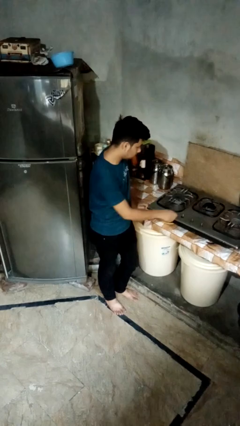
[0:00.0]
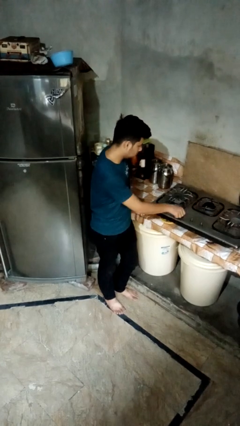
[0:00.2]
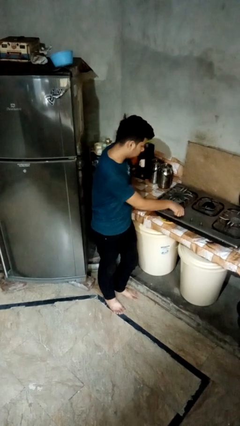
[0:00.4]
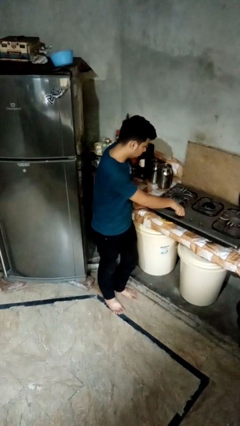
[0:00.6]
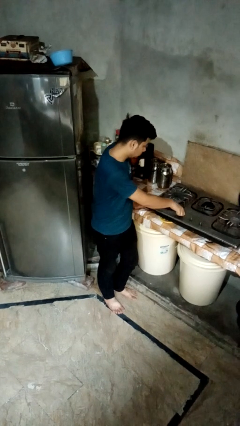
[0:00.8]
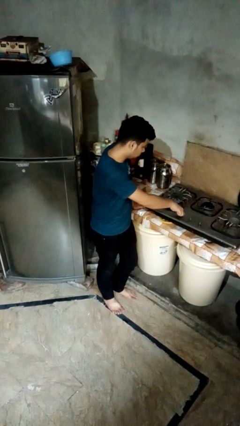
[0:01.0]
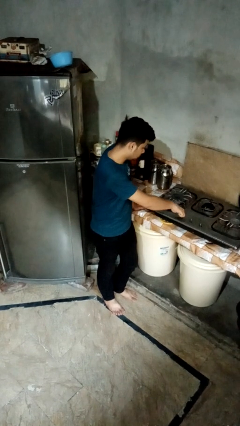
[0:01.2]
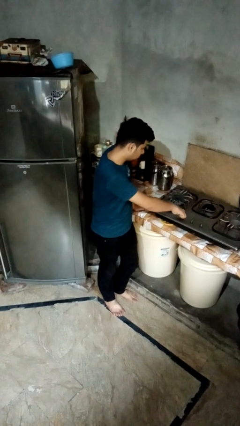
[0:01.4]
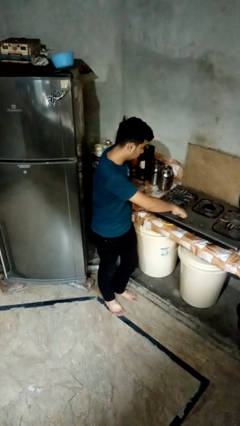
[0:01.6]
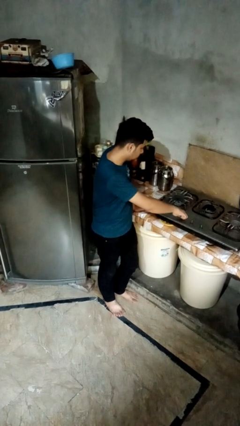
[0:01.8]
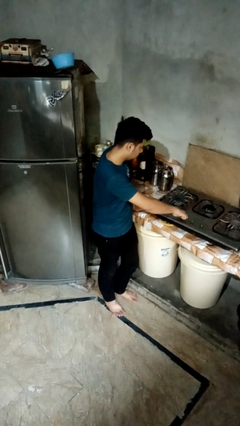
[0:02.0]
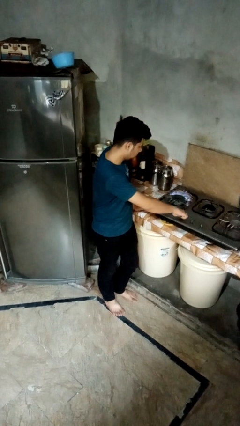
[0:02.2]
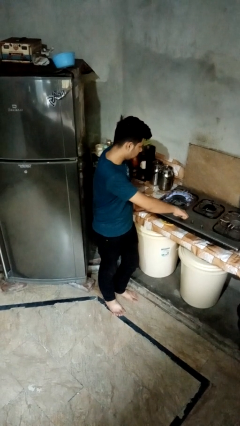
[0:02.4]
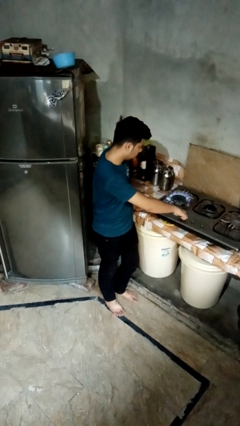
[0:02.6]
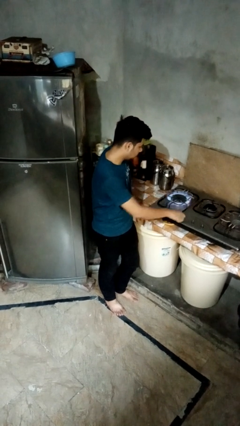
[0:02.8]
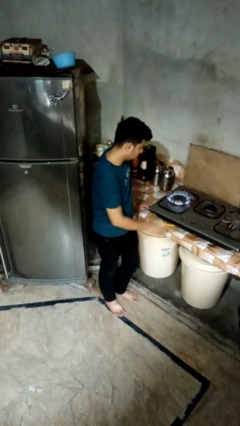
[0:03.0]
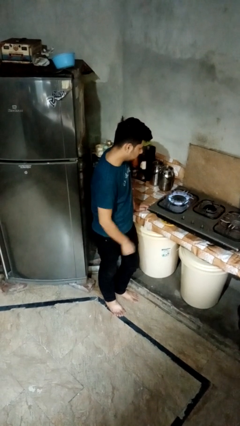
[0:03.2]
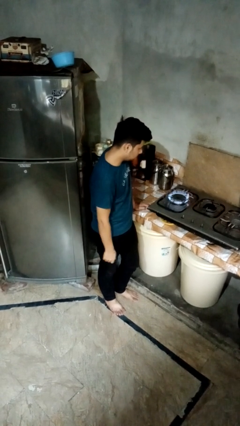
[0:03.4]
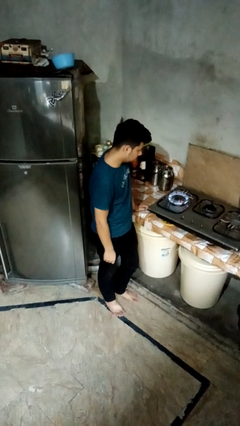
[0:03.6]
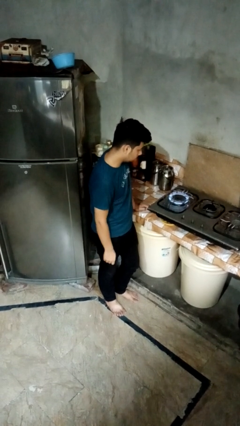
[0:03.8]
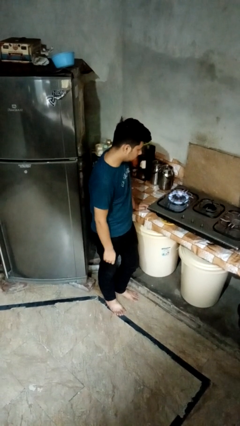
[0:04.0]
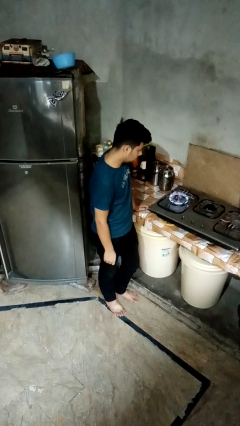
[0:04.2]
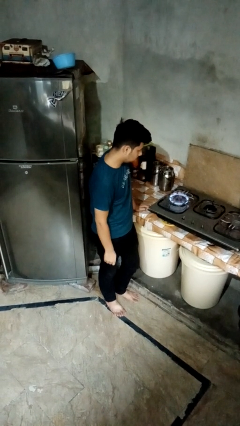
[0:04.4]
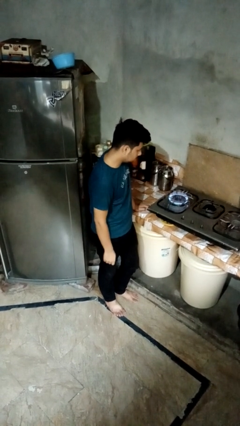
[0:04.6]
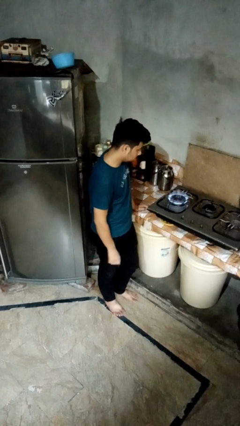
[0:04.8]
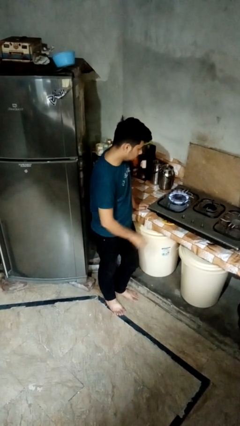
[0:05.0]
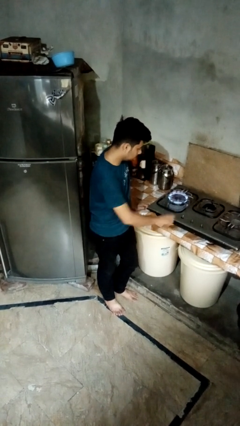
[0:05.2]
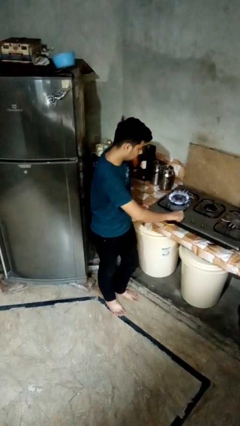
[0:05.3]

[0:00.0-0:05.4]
person turns on stovetop

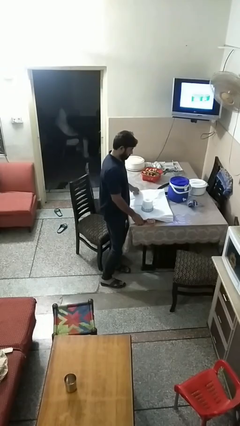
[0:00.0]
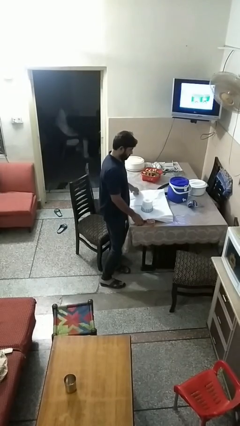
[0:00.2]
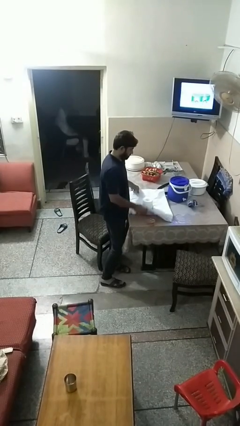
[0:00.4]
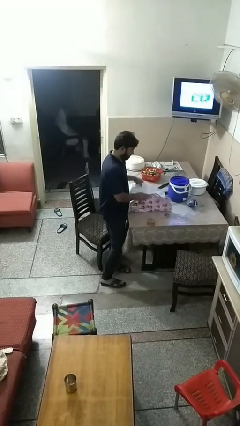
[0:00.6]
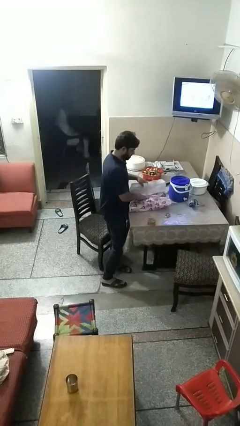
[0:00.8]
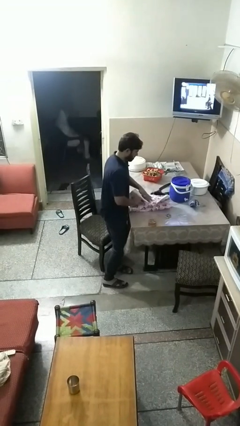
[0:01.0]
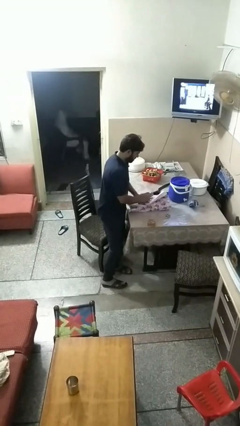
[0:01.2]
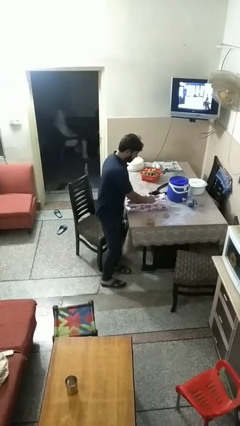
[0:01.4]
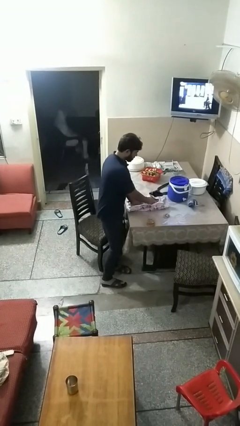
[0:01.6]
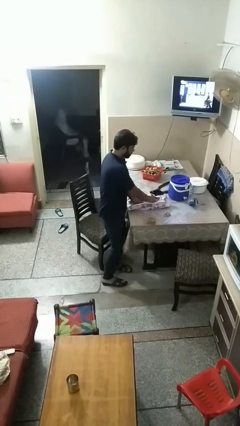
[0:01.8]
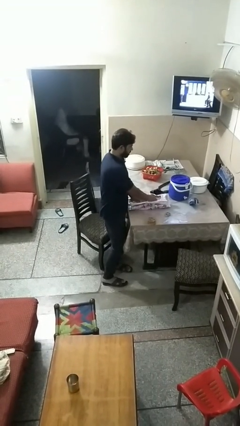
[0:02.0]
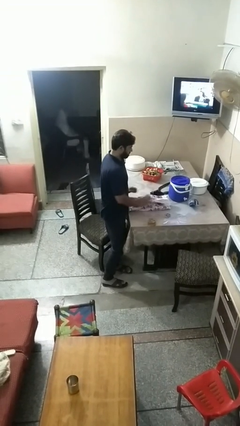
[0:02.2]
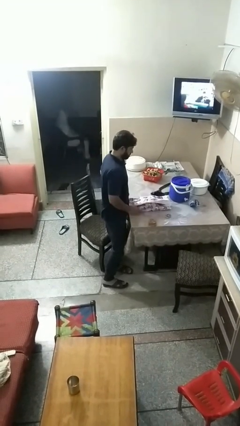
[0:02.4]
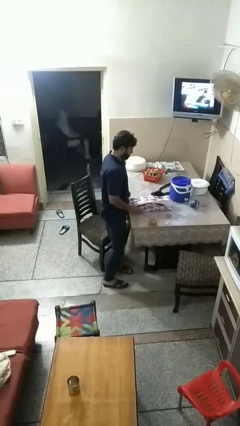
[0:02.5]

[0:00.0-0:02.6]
person wraps box

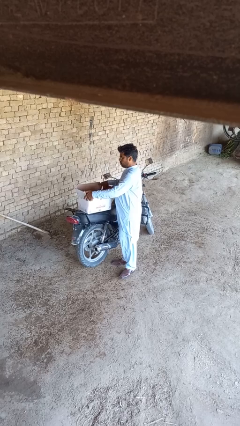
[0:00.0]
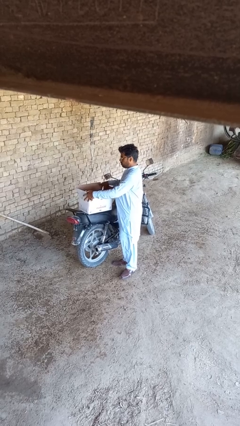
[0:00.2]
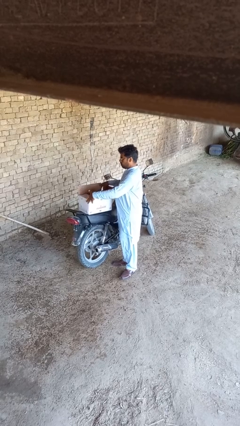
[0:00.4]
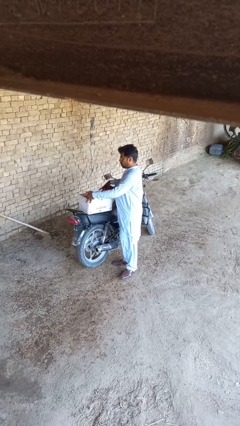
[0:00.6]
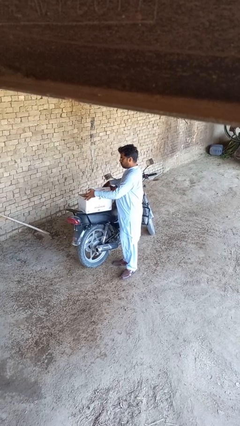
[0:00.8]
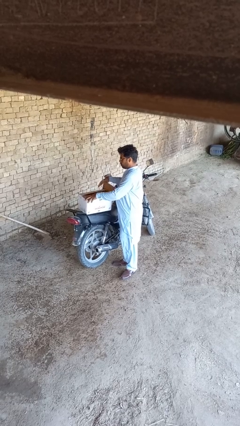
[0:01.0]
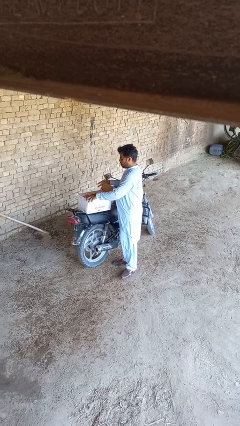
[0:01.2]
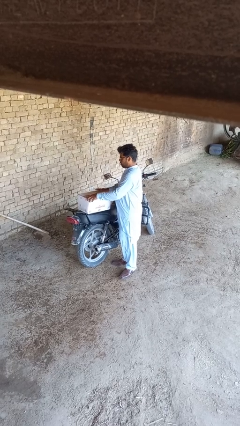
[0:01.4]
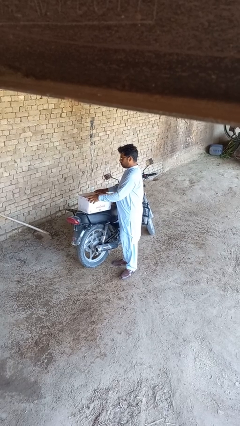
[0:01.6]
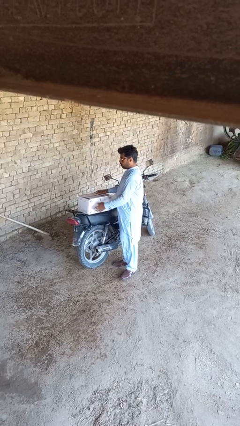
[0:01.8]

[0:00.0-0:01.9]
person closes box

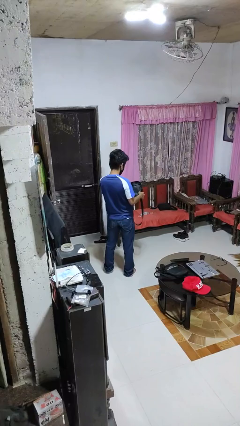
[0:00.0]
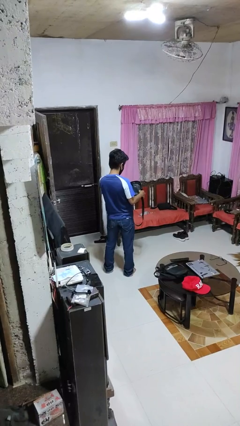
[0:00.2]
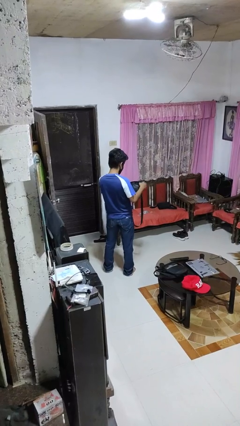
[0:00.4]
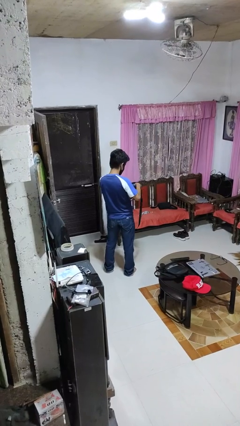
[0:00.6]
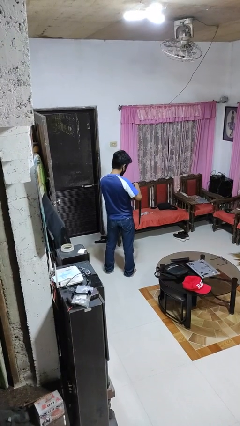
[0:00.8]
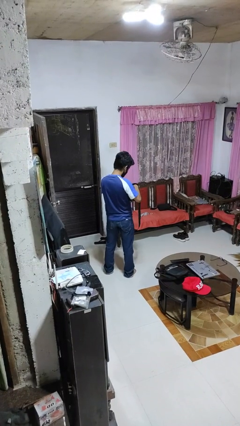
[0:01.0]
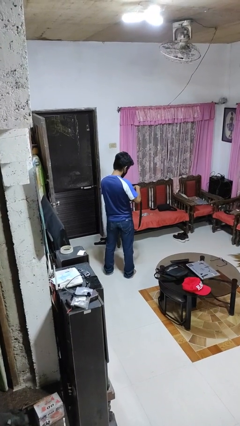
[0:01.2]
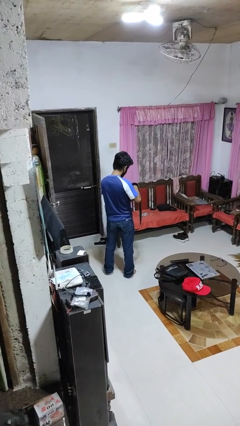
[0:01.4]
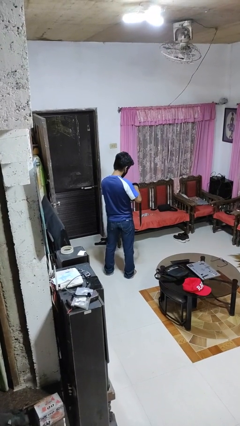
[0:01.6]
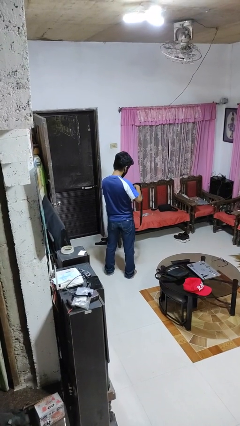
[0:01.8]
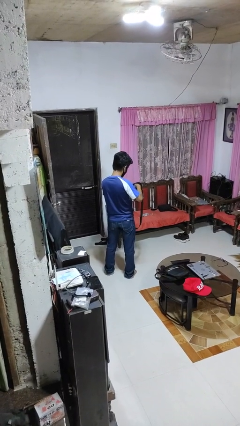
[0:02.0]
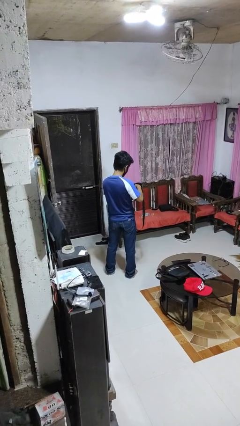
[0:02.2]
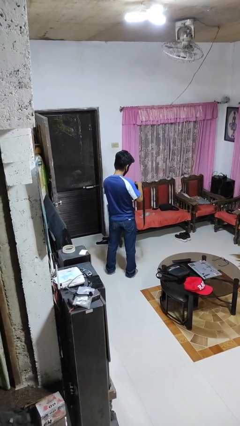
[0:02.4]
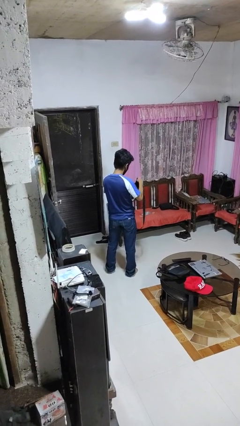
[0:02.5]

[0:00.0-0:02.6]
person searches in purse

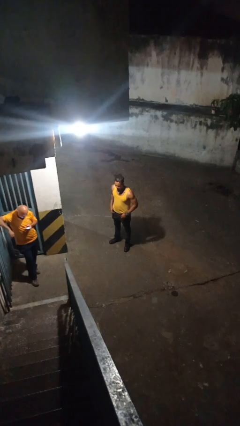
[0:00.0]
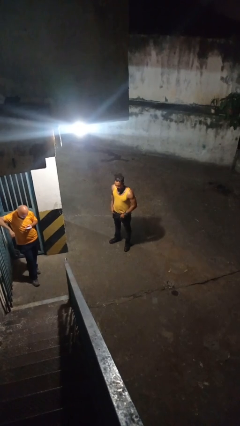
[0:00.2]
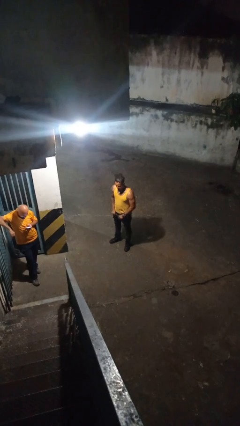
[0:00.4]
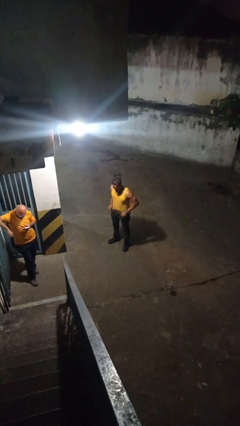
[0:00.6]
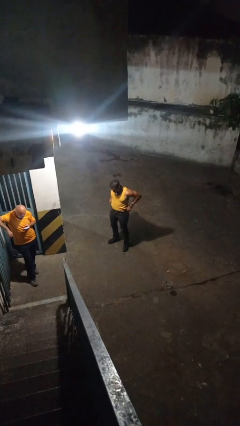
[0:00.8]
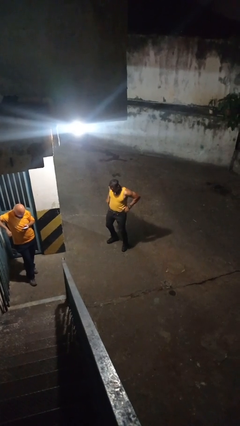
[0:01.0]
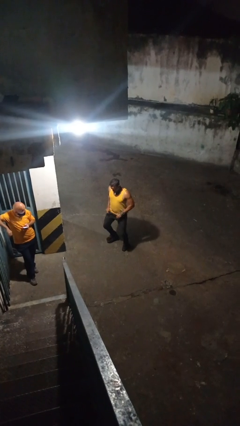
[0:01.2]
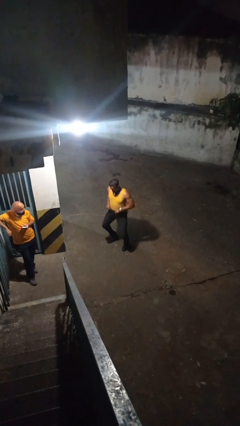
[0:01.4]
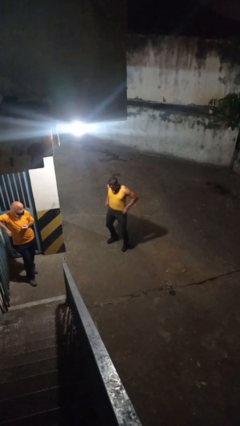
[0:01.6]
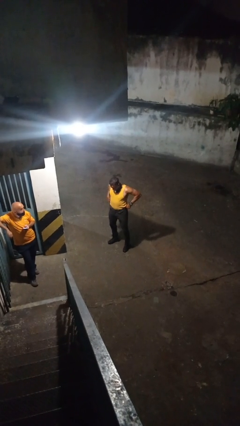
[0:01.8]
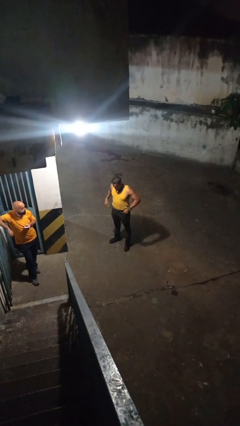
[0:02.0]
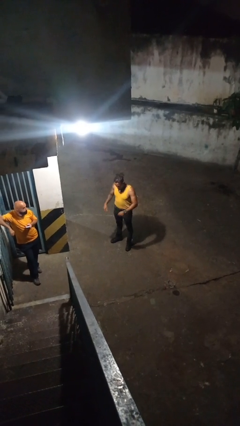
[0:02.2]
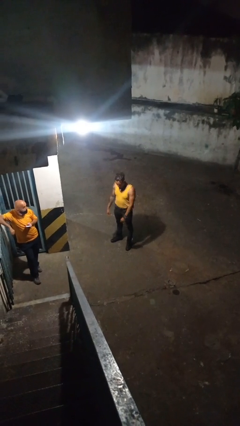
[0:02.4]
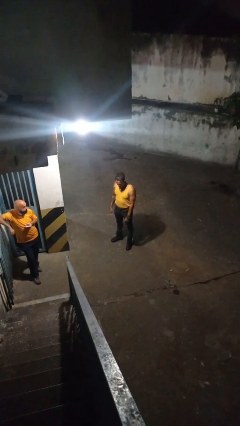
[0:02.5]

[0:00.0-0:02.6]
person hikes up pants

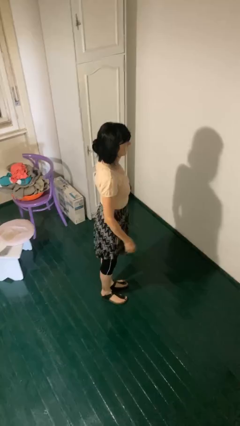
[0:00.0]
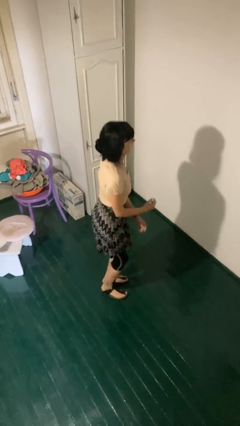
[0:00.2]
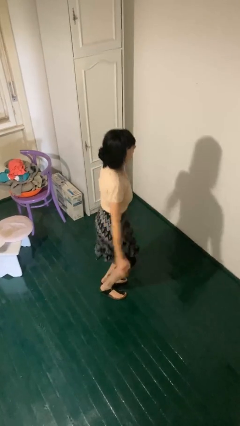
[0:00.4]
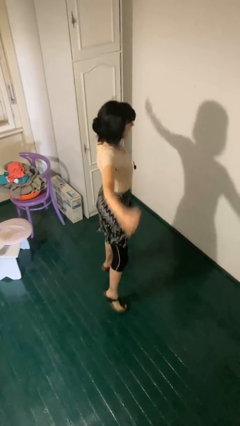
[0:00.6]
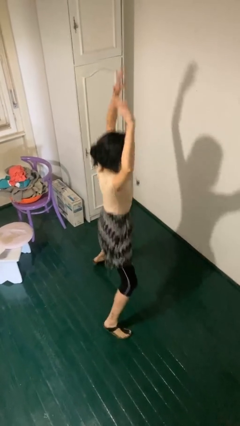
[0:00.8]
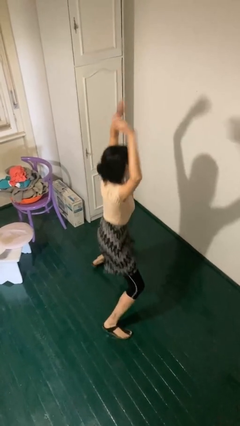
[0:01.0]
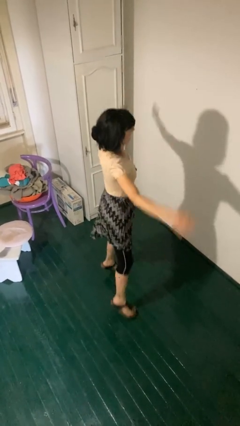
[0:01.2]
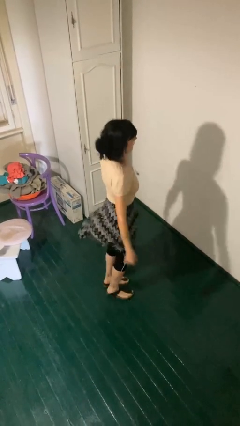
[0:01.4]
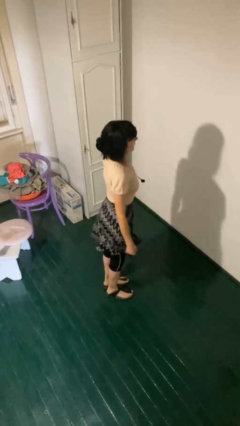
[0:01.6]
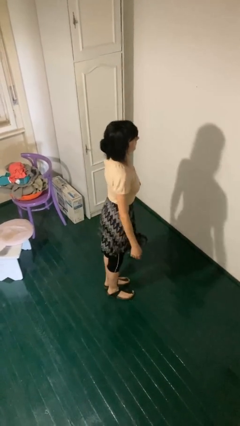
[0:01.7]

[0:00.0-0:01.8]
person exercises with jumping jacks

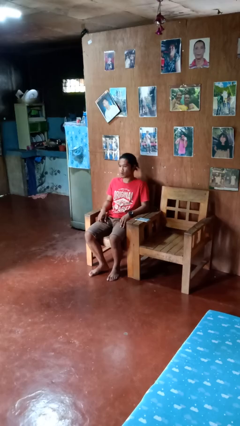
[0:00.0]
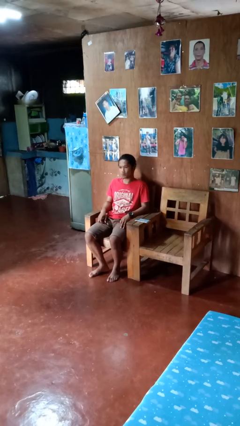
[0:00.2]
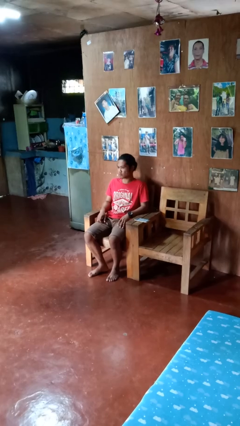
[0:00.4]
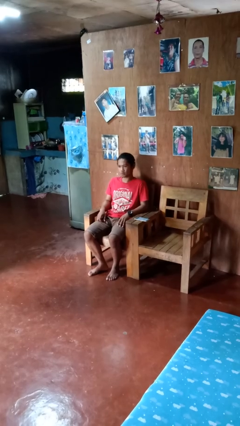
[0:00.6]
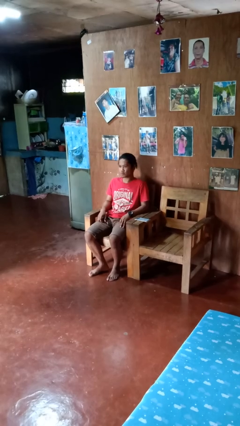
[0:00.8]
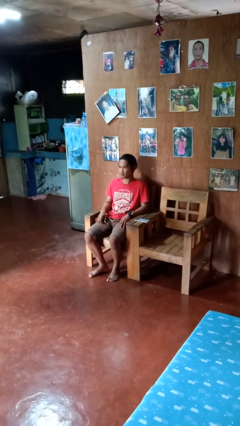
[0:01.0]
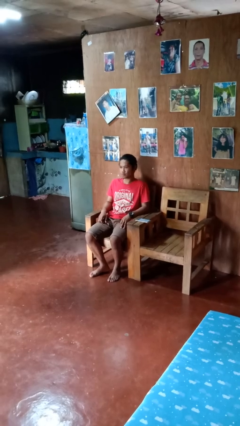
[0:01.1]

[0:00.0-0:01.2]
person shakes head
